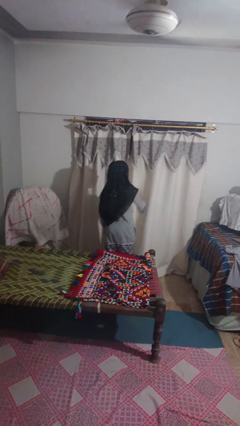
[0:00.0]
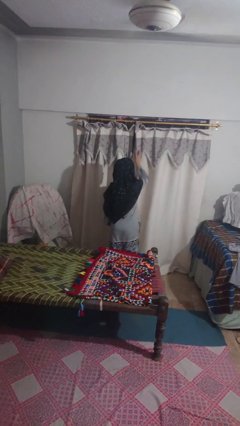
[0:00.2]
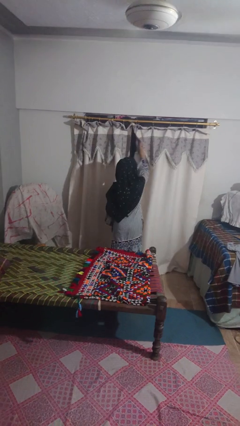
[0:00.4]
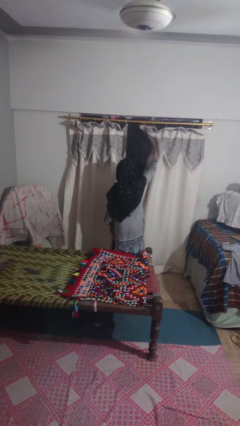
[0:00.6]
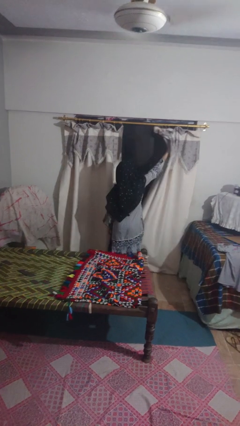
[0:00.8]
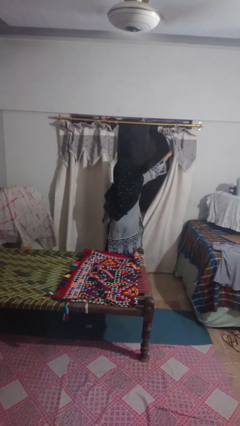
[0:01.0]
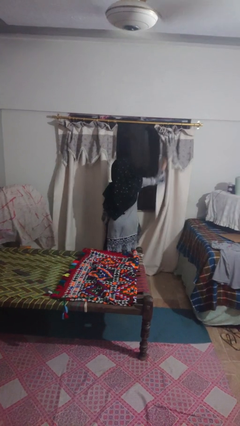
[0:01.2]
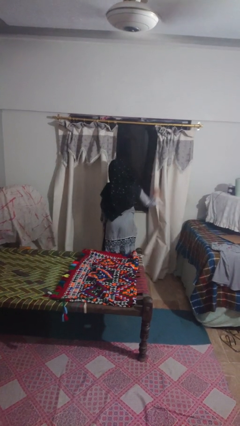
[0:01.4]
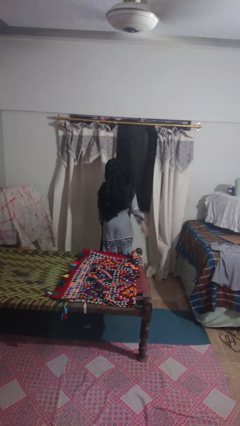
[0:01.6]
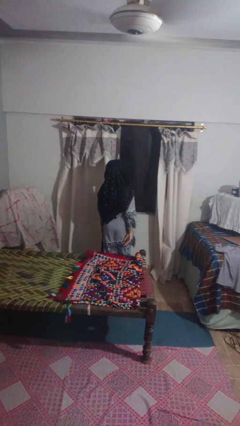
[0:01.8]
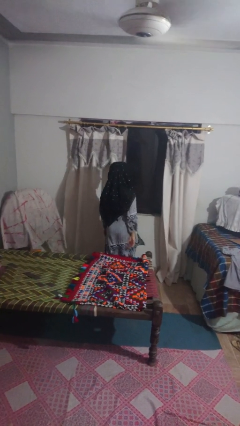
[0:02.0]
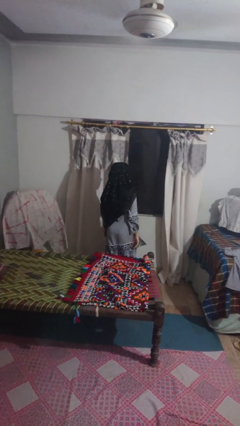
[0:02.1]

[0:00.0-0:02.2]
person opens curtains

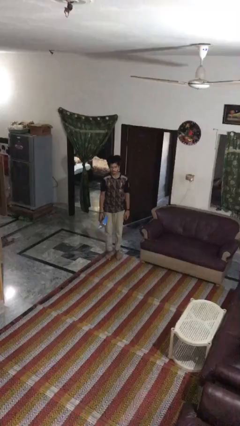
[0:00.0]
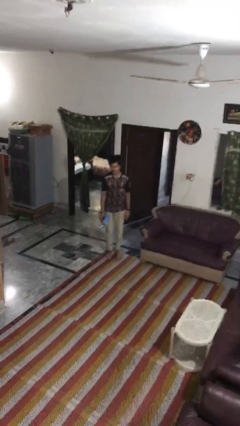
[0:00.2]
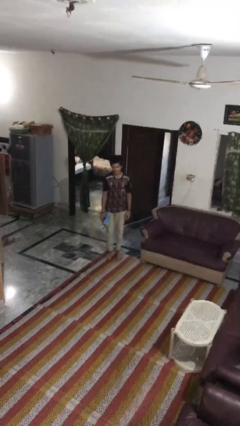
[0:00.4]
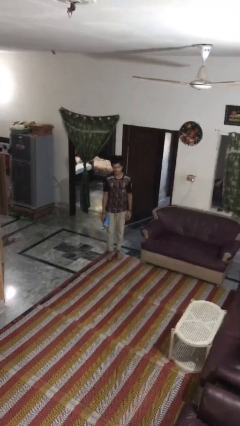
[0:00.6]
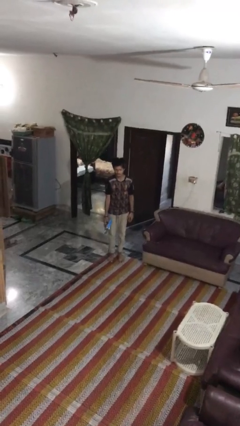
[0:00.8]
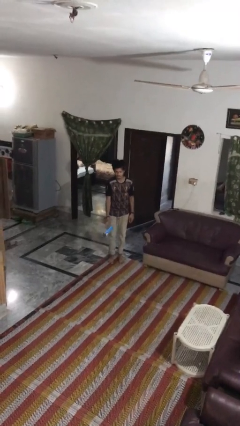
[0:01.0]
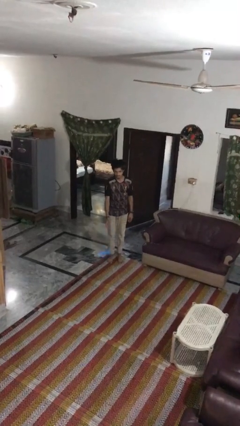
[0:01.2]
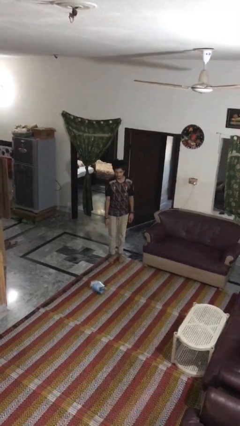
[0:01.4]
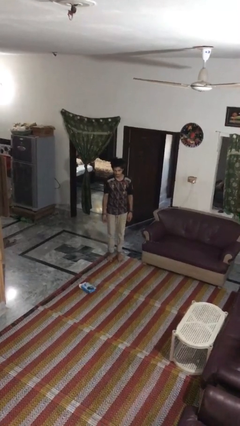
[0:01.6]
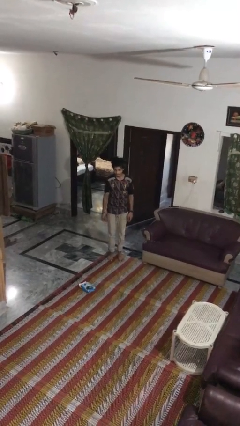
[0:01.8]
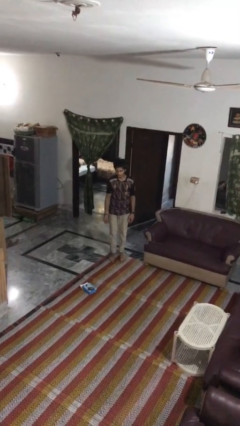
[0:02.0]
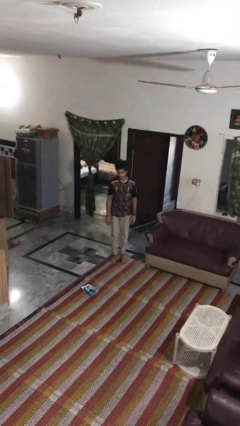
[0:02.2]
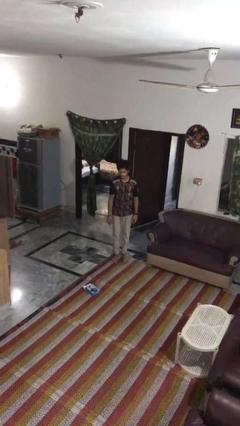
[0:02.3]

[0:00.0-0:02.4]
person throws object to ground

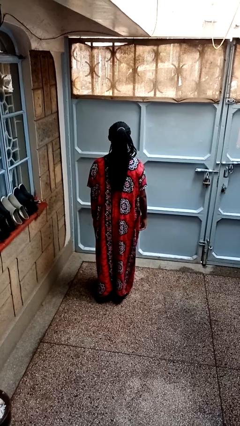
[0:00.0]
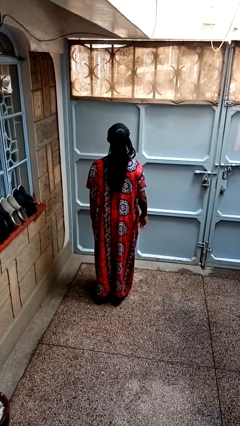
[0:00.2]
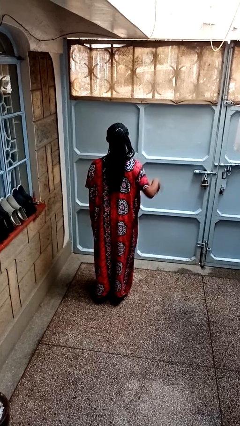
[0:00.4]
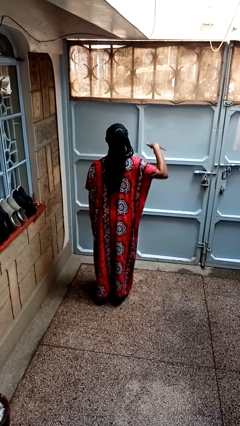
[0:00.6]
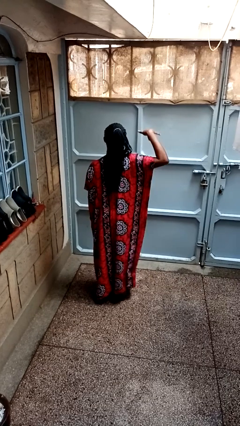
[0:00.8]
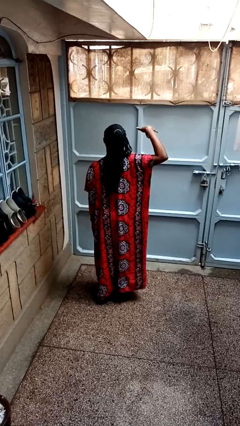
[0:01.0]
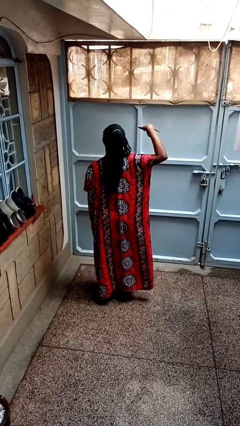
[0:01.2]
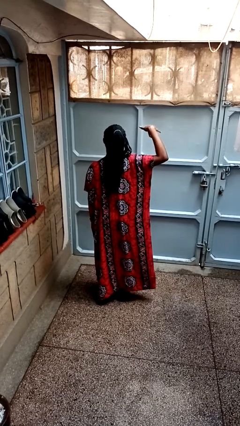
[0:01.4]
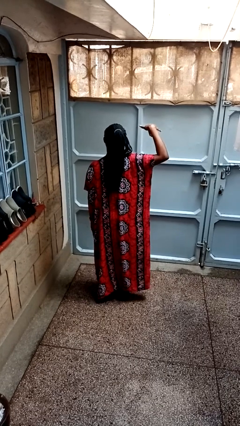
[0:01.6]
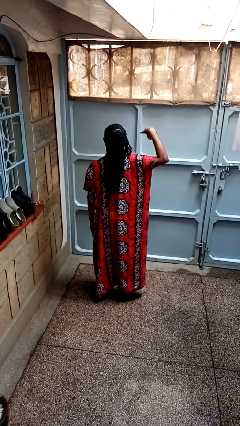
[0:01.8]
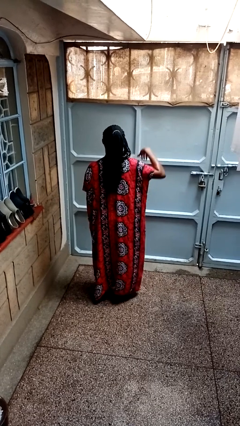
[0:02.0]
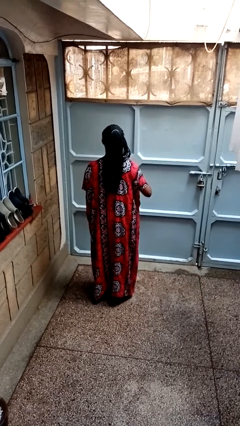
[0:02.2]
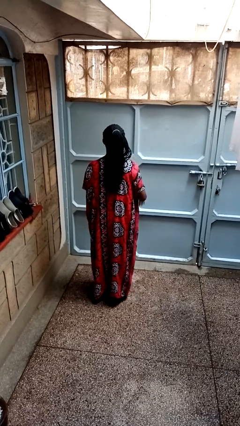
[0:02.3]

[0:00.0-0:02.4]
person gestures hang loose

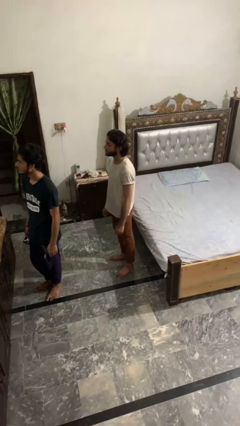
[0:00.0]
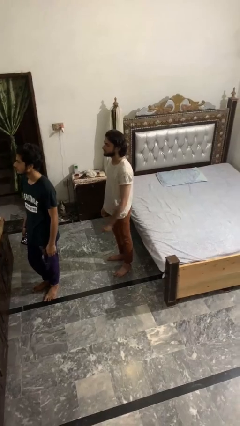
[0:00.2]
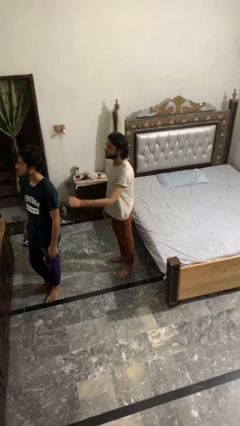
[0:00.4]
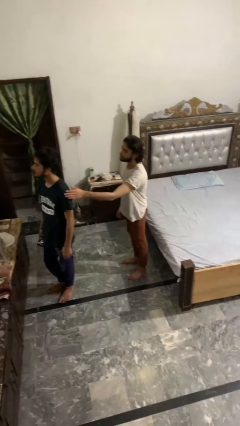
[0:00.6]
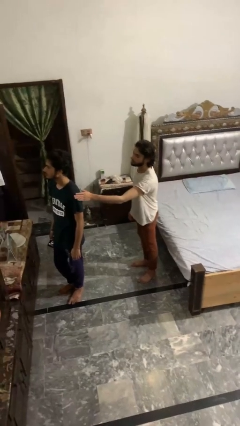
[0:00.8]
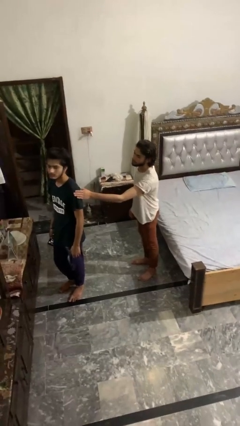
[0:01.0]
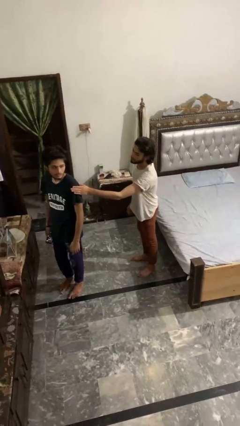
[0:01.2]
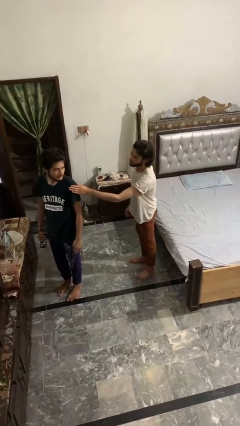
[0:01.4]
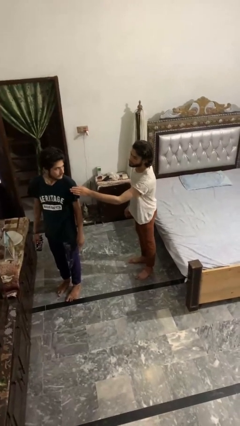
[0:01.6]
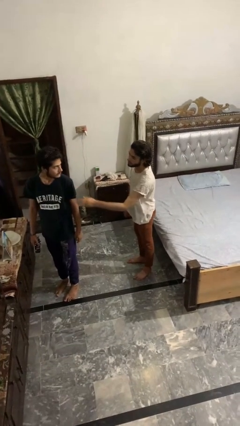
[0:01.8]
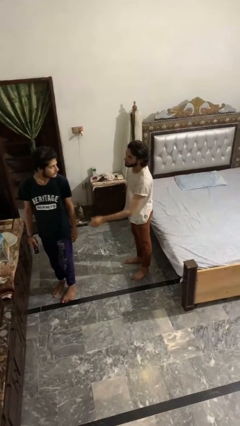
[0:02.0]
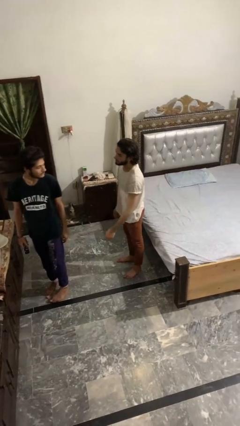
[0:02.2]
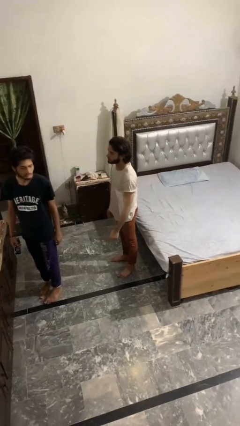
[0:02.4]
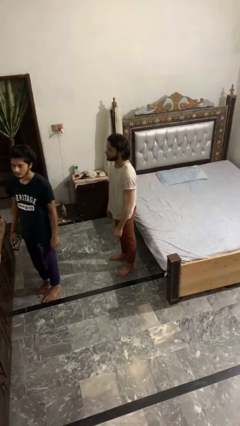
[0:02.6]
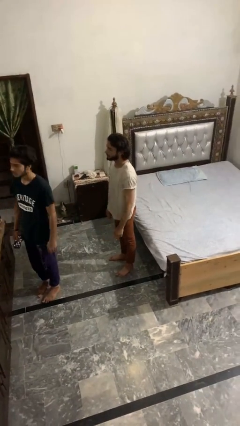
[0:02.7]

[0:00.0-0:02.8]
person touches back of person

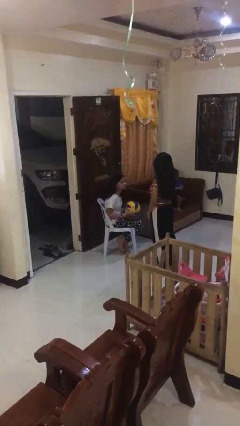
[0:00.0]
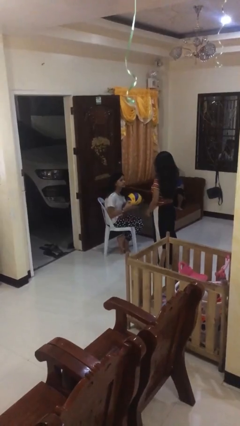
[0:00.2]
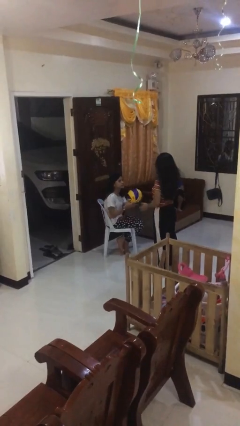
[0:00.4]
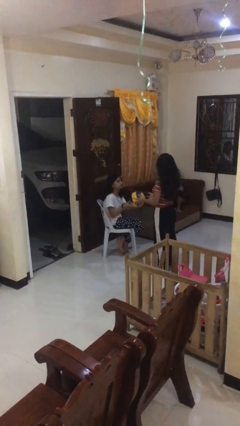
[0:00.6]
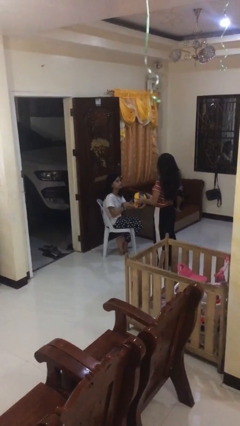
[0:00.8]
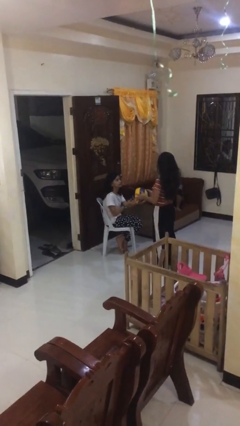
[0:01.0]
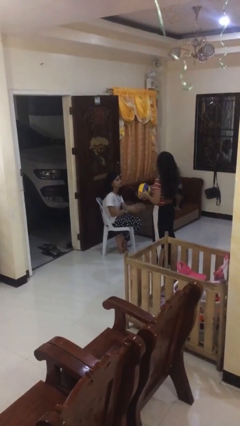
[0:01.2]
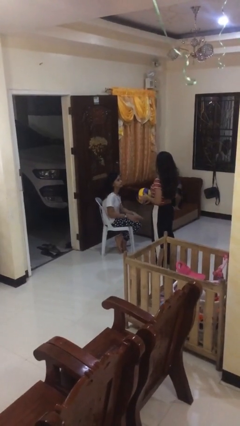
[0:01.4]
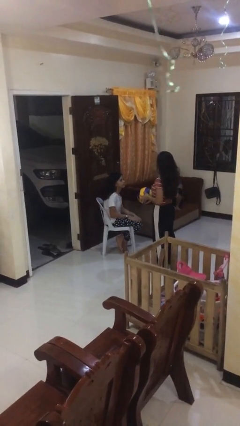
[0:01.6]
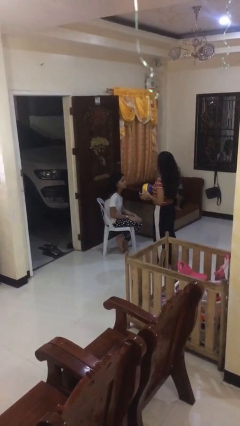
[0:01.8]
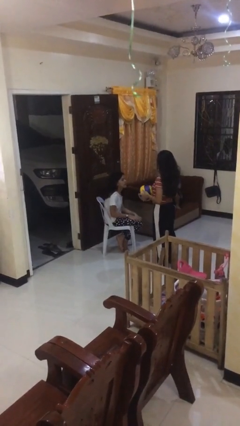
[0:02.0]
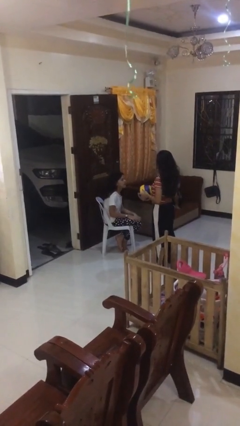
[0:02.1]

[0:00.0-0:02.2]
person transfers object to person

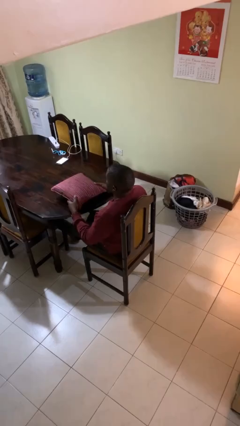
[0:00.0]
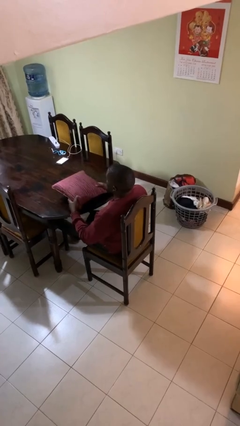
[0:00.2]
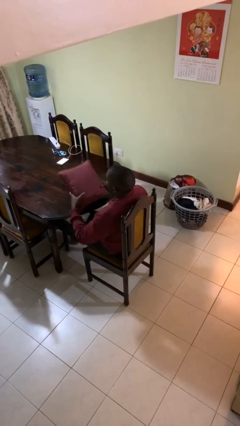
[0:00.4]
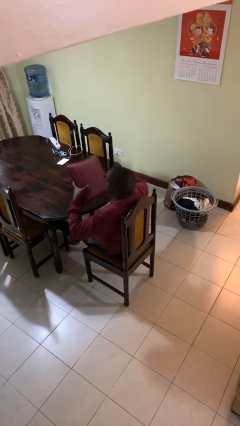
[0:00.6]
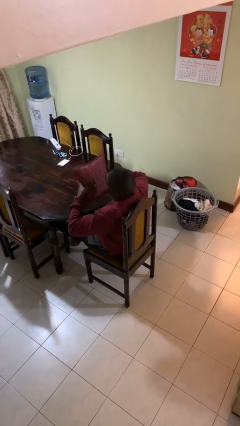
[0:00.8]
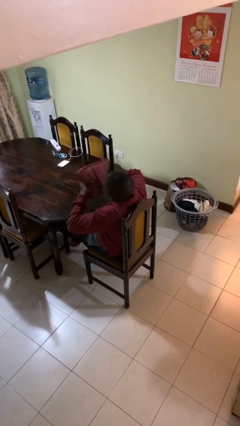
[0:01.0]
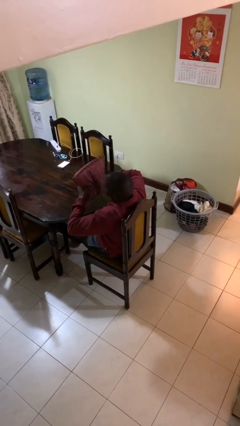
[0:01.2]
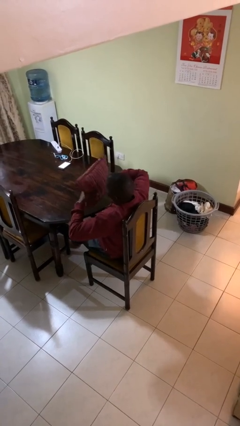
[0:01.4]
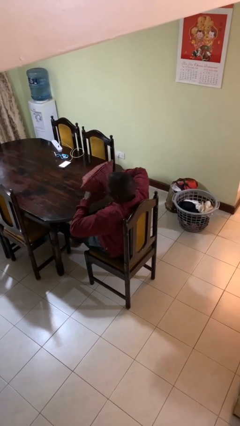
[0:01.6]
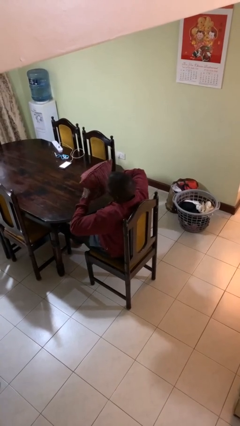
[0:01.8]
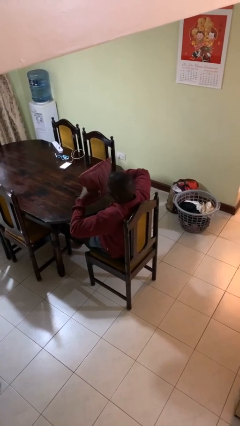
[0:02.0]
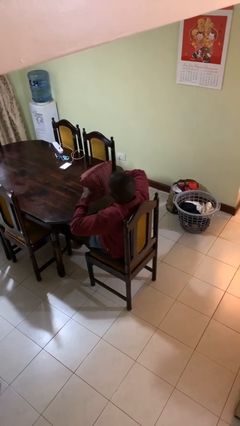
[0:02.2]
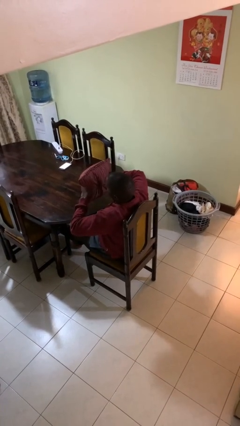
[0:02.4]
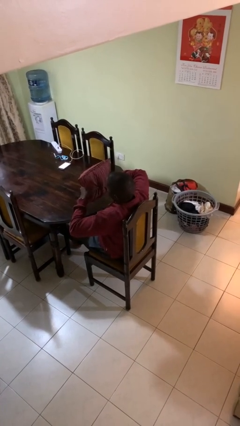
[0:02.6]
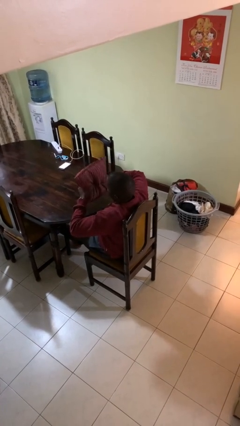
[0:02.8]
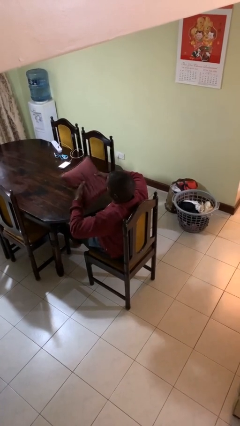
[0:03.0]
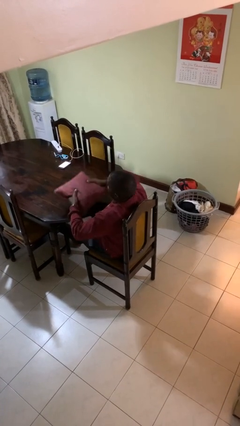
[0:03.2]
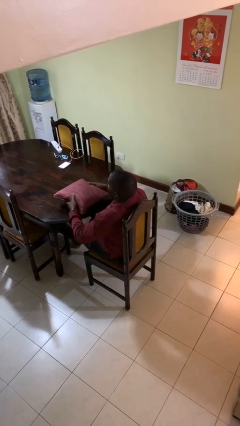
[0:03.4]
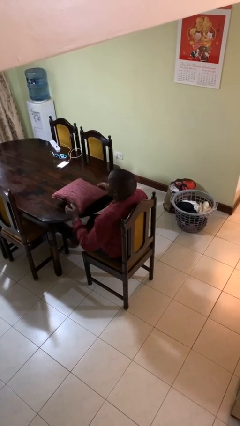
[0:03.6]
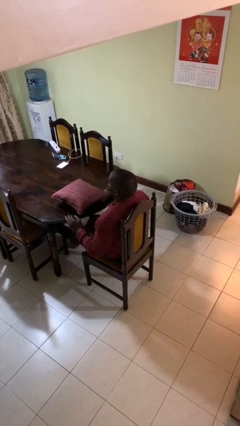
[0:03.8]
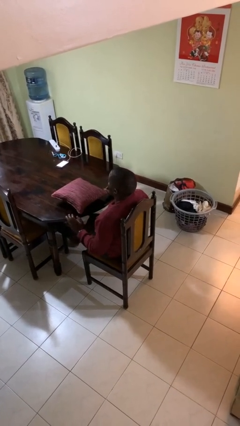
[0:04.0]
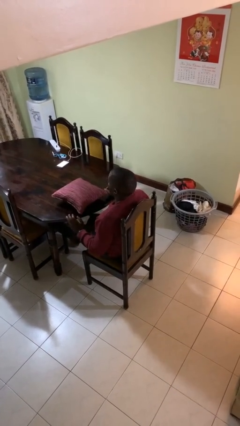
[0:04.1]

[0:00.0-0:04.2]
person squeezes object

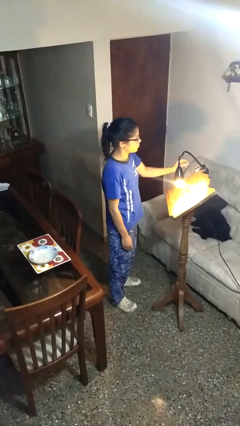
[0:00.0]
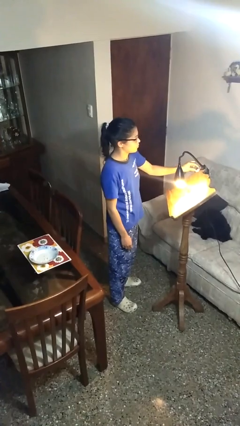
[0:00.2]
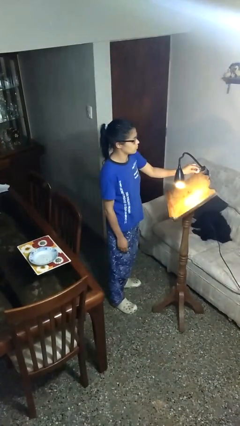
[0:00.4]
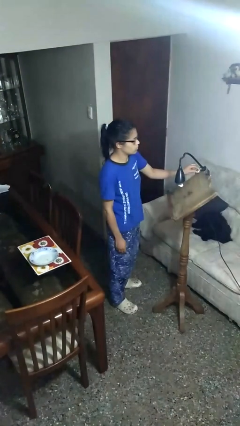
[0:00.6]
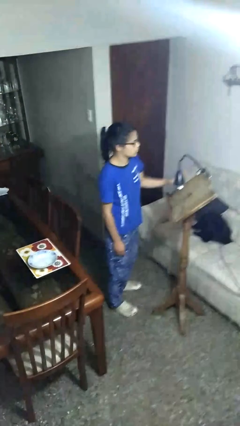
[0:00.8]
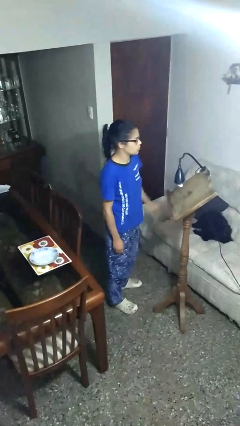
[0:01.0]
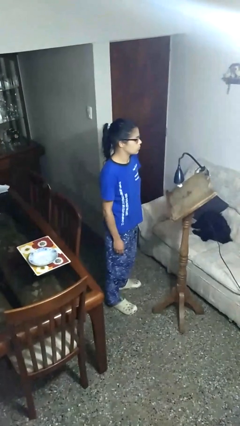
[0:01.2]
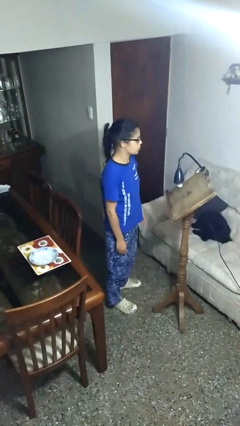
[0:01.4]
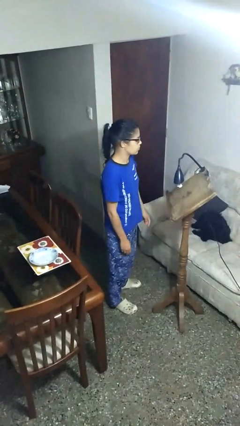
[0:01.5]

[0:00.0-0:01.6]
person turns off lamp
